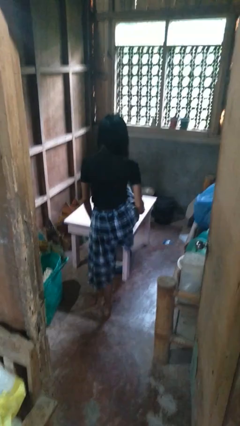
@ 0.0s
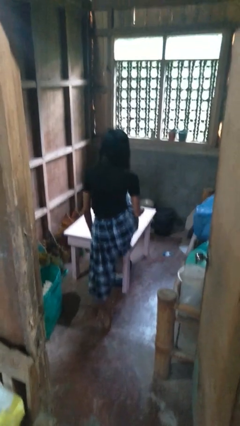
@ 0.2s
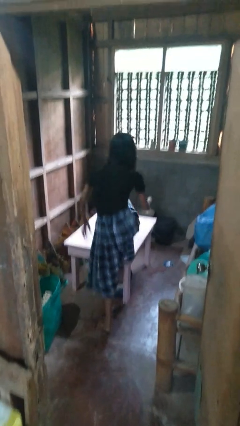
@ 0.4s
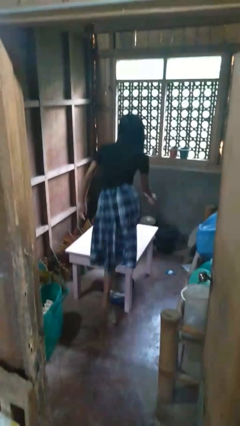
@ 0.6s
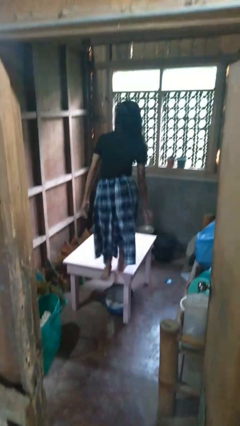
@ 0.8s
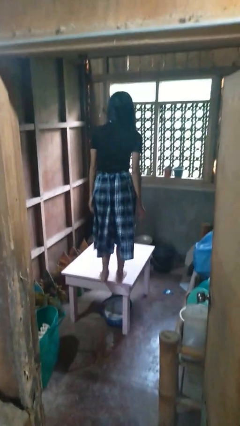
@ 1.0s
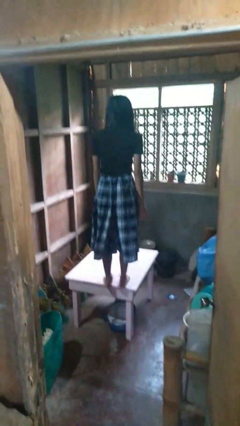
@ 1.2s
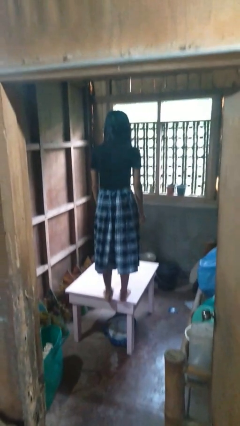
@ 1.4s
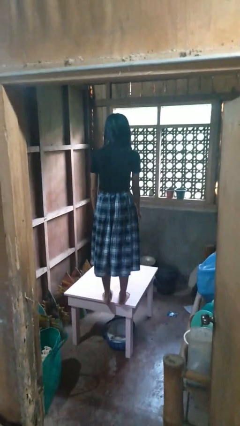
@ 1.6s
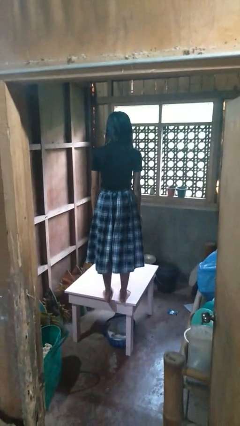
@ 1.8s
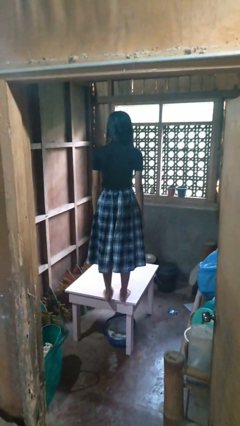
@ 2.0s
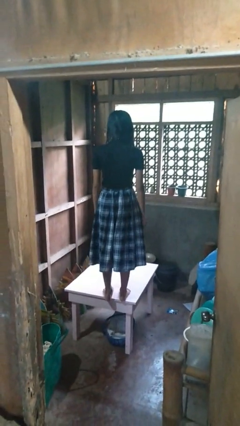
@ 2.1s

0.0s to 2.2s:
person climbs on table

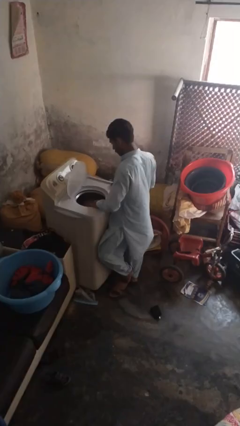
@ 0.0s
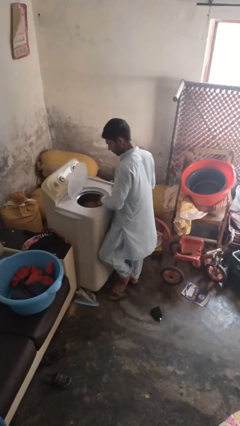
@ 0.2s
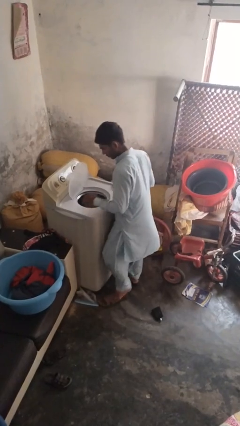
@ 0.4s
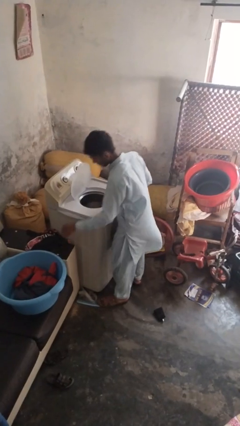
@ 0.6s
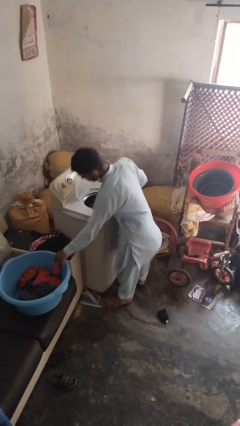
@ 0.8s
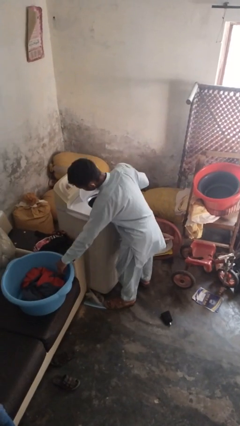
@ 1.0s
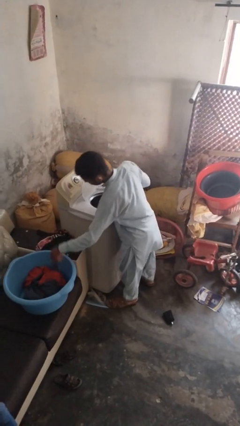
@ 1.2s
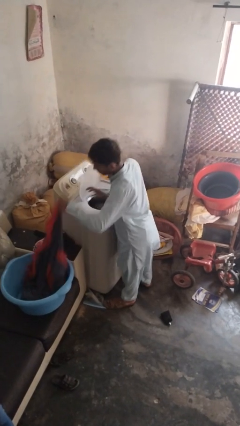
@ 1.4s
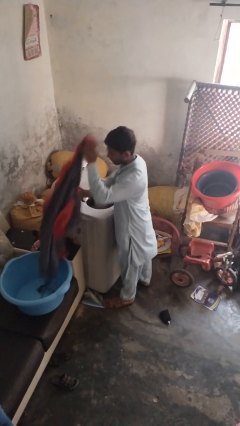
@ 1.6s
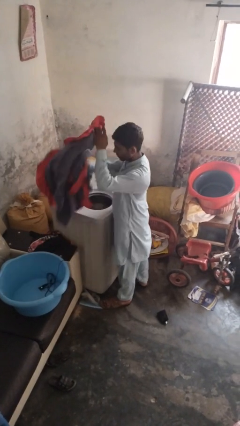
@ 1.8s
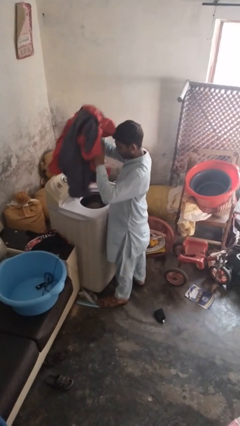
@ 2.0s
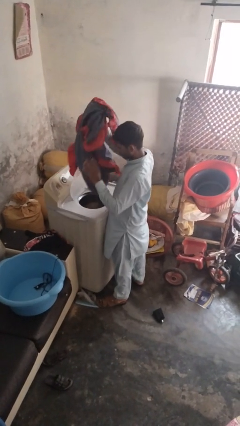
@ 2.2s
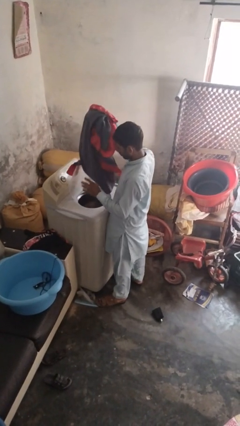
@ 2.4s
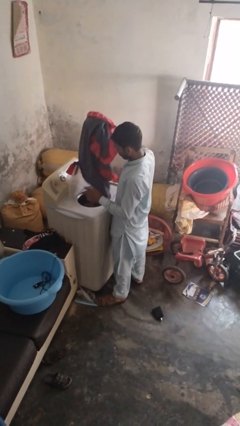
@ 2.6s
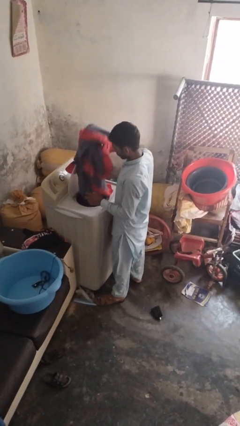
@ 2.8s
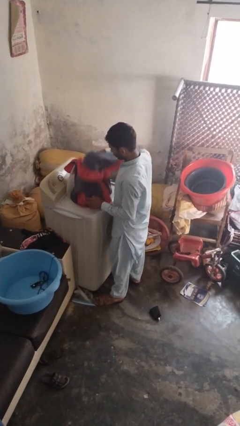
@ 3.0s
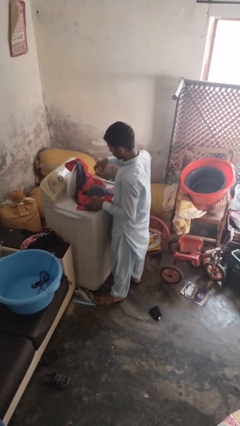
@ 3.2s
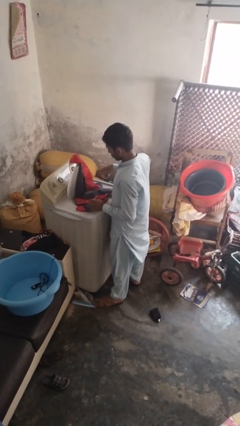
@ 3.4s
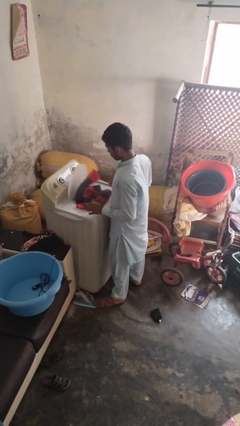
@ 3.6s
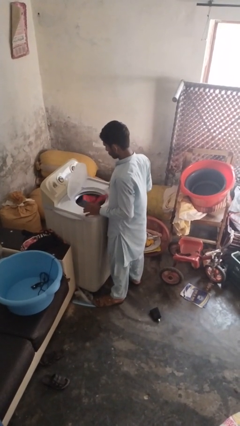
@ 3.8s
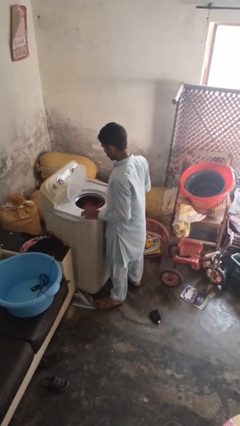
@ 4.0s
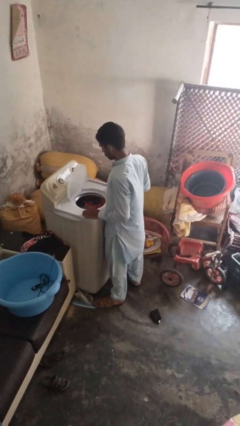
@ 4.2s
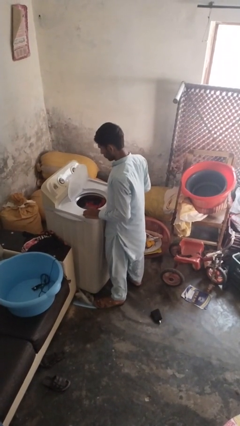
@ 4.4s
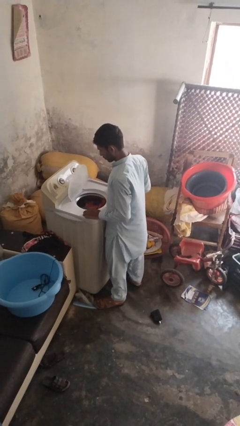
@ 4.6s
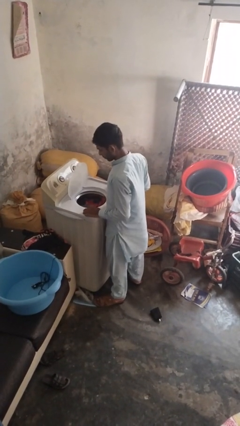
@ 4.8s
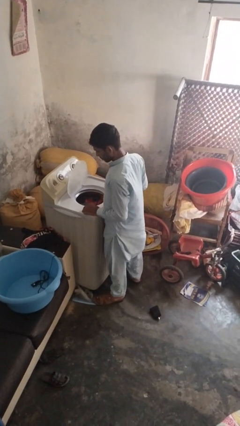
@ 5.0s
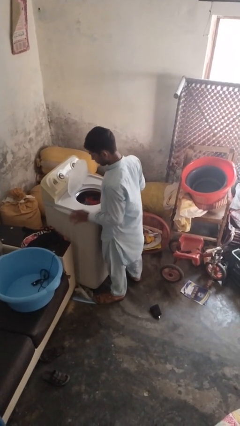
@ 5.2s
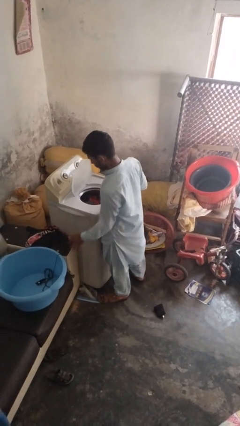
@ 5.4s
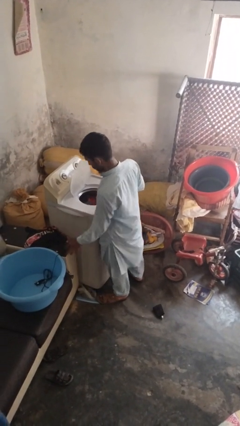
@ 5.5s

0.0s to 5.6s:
person loads clotheswasher

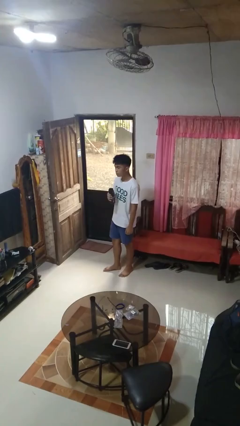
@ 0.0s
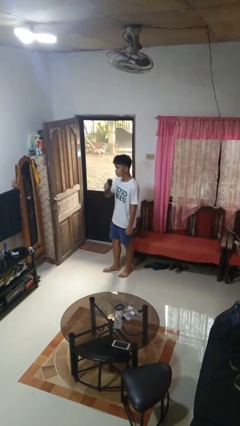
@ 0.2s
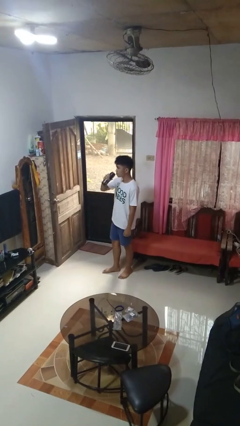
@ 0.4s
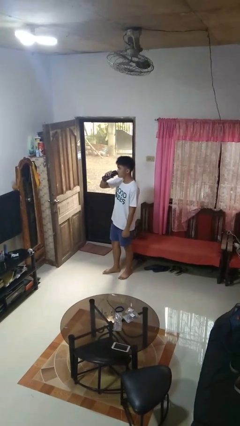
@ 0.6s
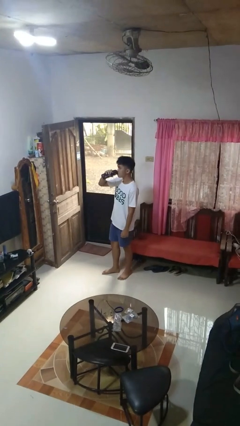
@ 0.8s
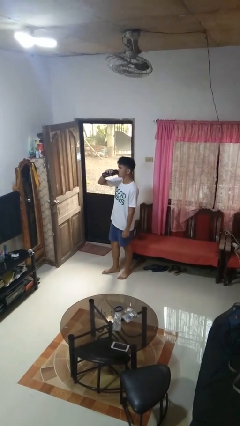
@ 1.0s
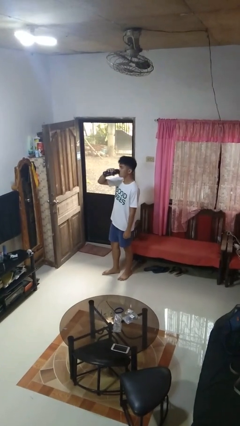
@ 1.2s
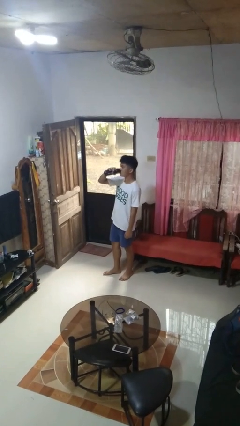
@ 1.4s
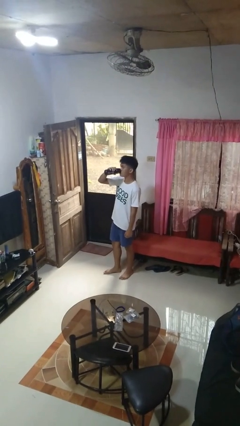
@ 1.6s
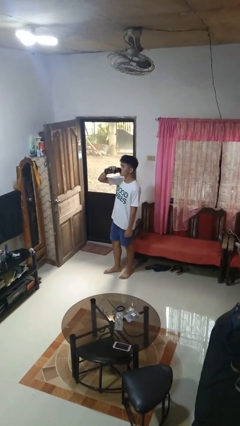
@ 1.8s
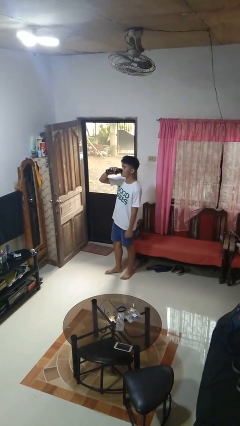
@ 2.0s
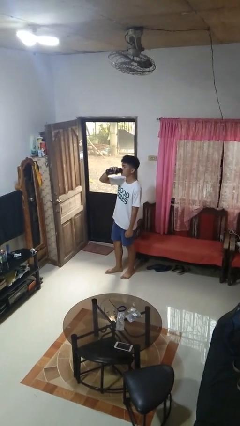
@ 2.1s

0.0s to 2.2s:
person drinks from bottle

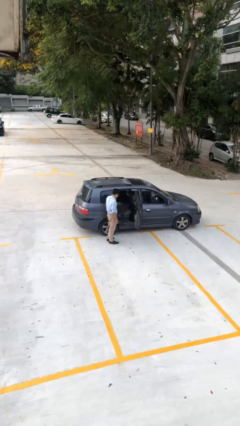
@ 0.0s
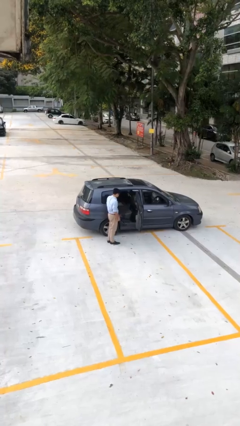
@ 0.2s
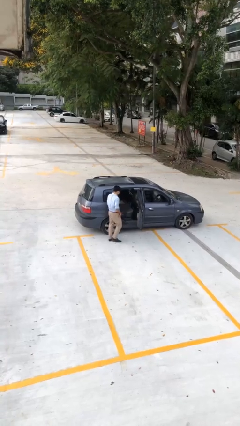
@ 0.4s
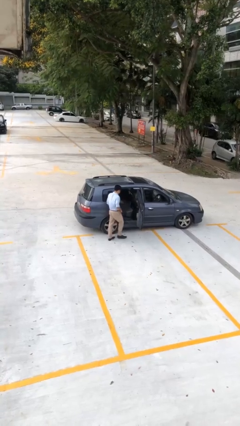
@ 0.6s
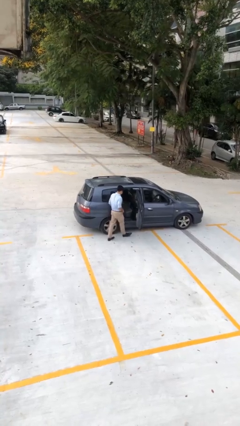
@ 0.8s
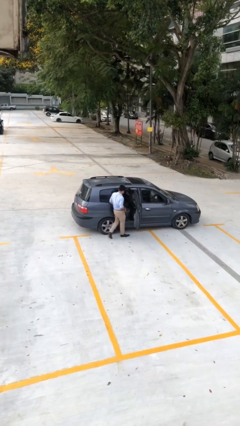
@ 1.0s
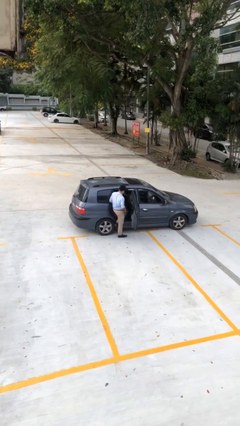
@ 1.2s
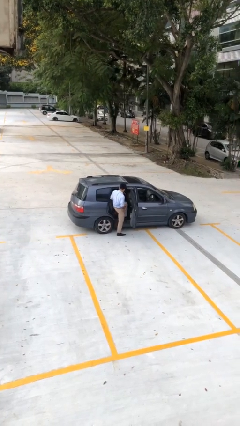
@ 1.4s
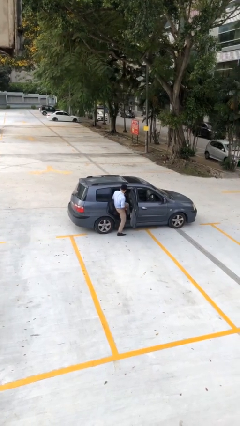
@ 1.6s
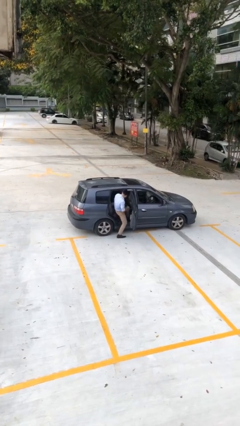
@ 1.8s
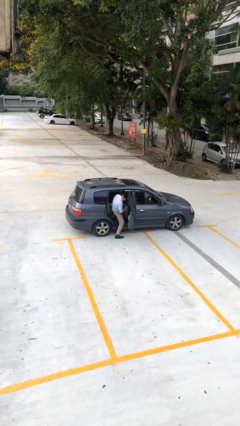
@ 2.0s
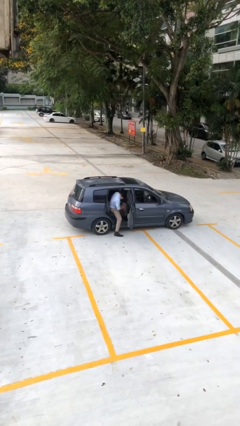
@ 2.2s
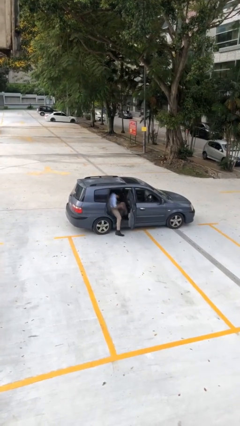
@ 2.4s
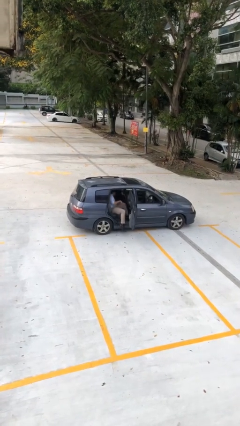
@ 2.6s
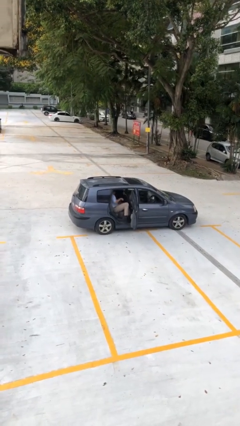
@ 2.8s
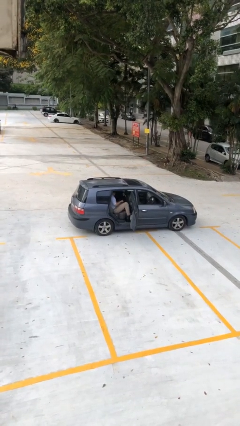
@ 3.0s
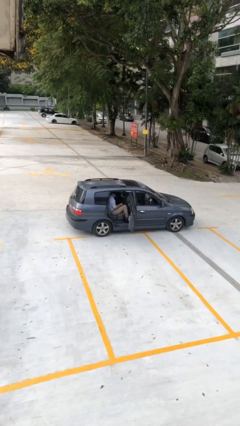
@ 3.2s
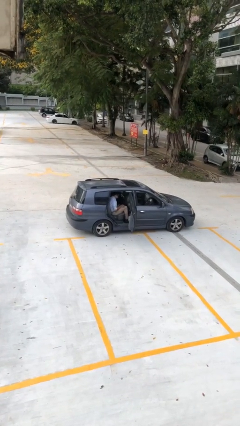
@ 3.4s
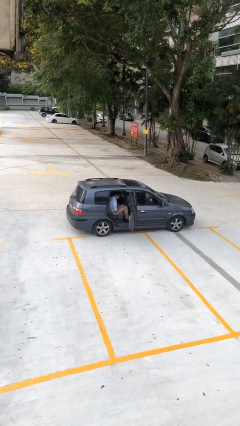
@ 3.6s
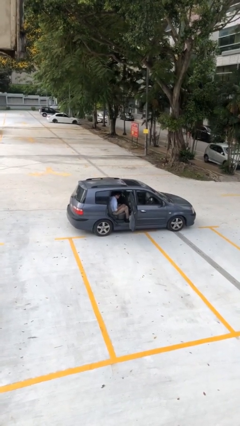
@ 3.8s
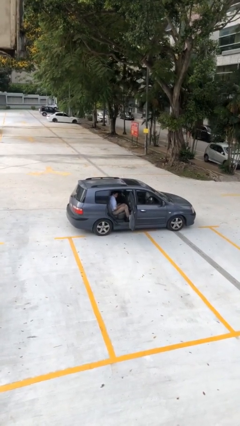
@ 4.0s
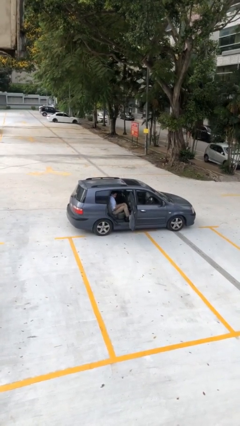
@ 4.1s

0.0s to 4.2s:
person enters car

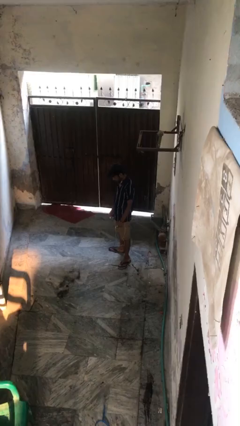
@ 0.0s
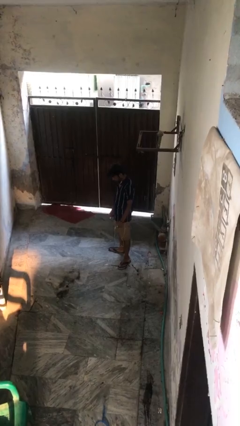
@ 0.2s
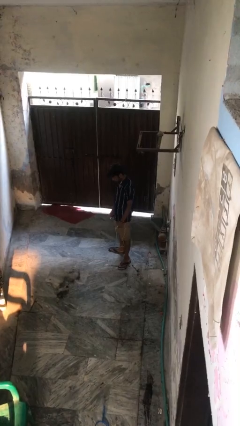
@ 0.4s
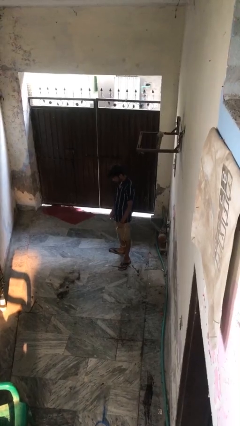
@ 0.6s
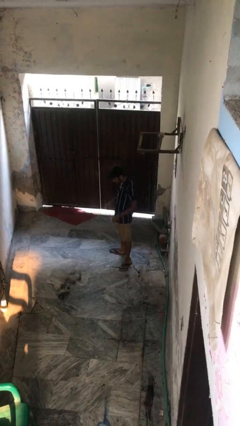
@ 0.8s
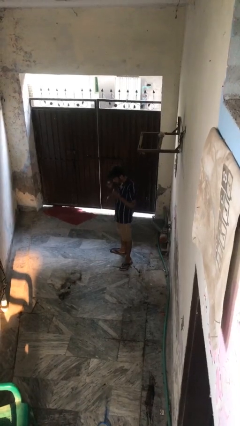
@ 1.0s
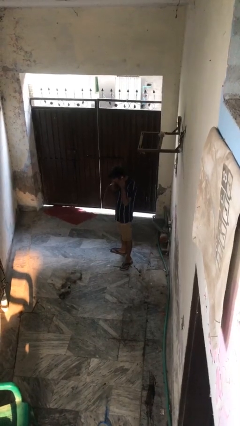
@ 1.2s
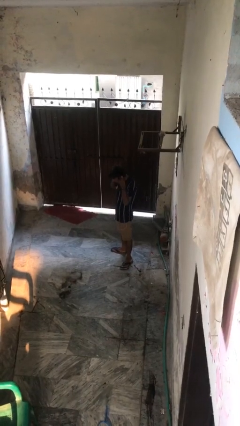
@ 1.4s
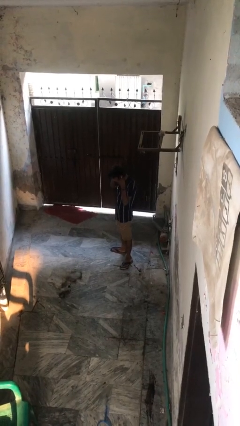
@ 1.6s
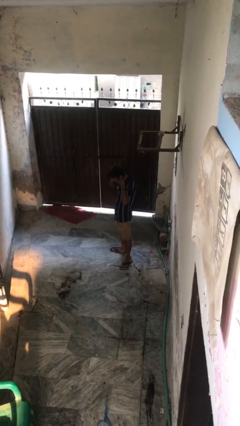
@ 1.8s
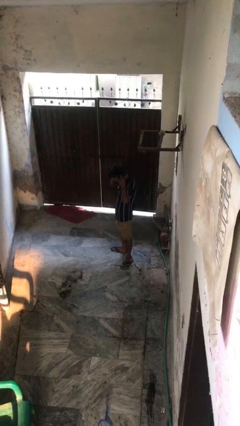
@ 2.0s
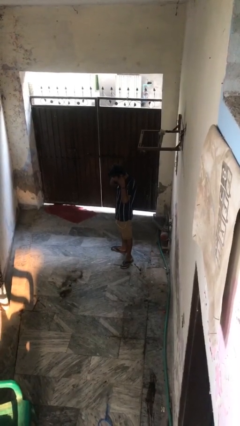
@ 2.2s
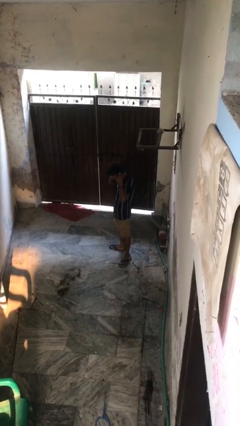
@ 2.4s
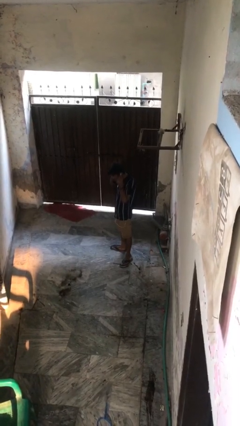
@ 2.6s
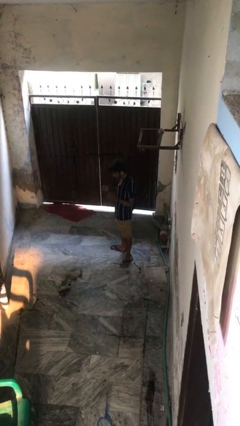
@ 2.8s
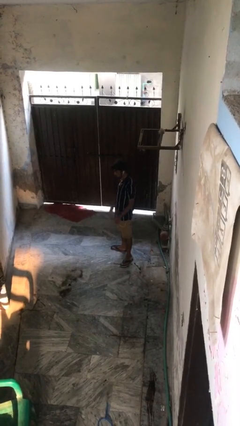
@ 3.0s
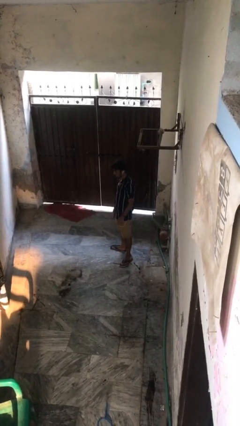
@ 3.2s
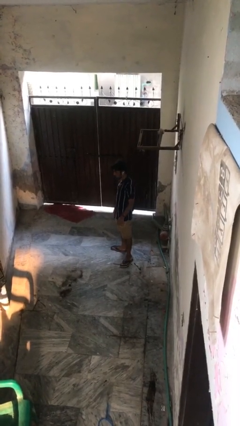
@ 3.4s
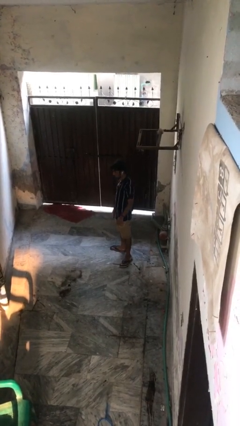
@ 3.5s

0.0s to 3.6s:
person puts on headphones

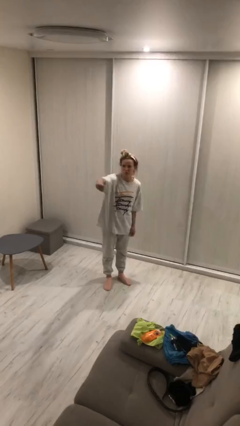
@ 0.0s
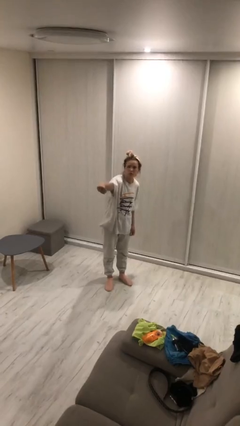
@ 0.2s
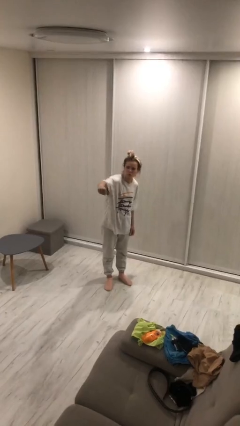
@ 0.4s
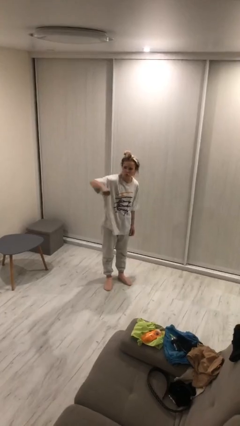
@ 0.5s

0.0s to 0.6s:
person karate chop
